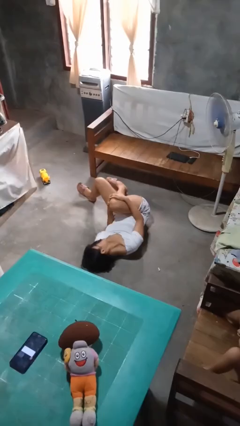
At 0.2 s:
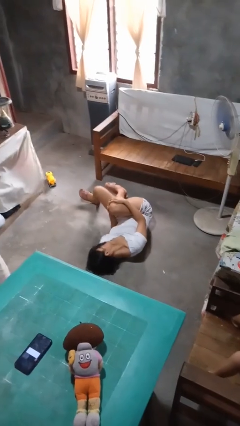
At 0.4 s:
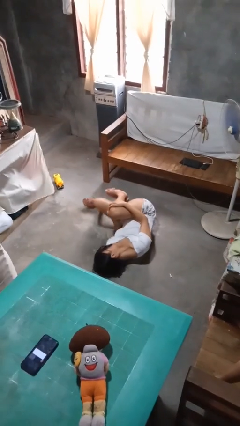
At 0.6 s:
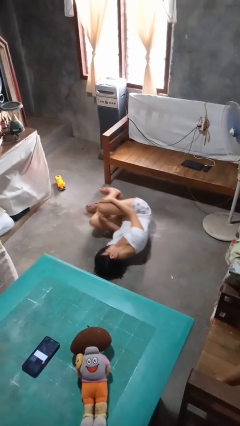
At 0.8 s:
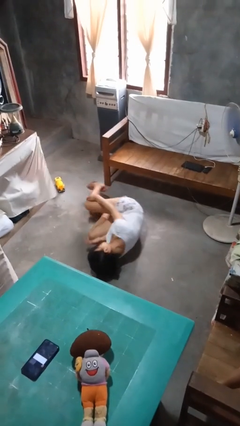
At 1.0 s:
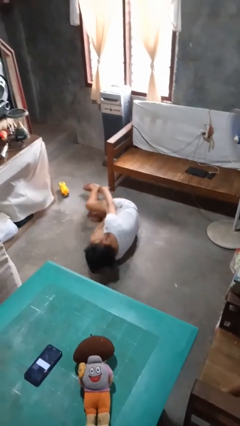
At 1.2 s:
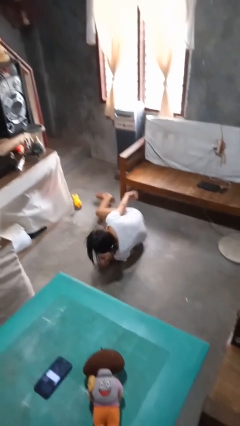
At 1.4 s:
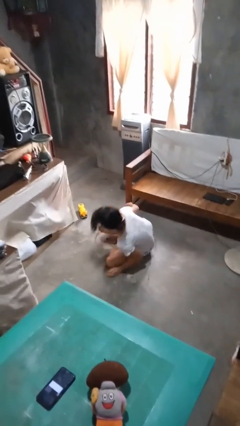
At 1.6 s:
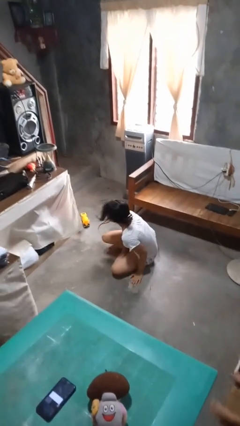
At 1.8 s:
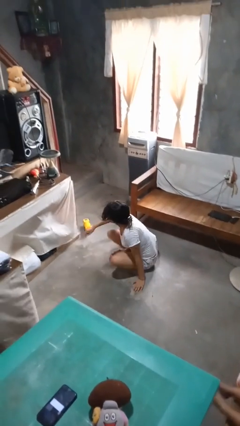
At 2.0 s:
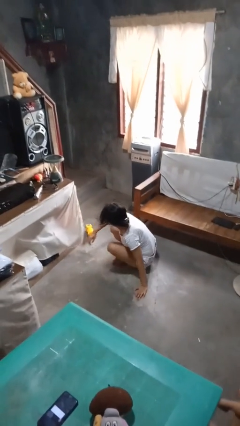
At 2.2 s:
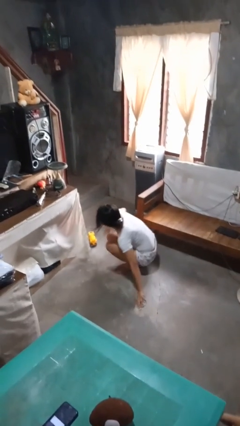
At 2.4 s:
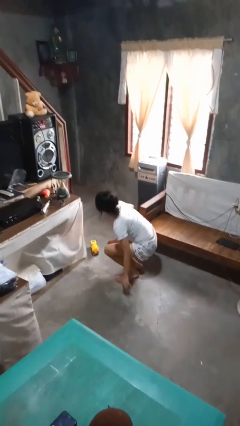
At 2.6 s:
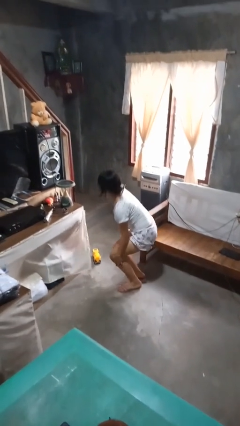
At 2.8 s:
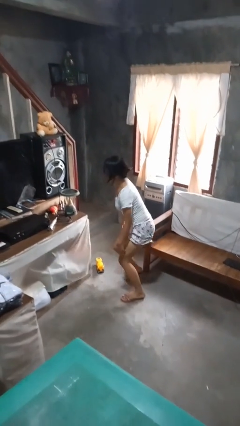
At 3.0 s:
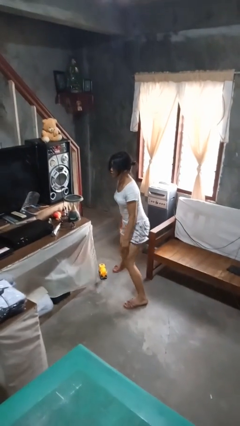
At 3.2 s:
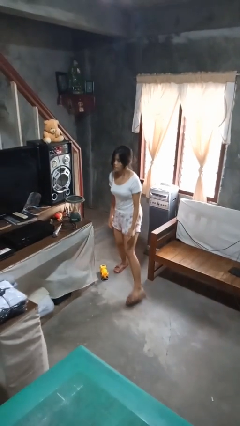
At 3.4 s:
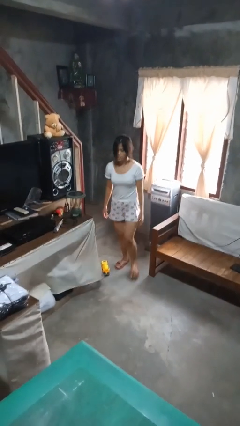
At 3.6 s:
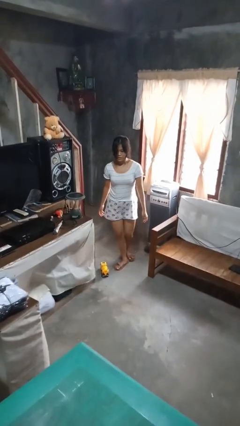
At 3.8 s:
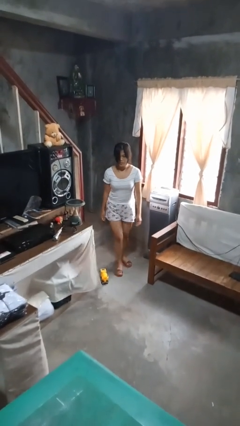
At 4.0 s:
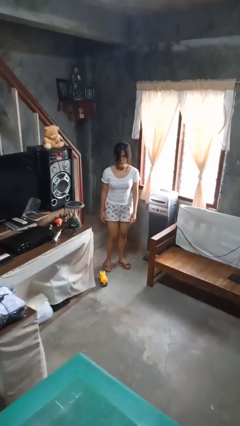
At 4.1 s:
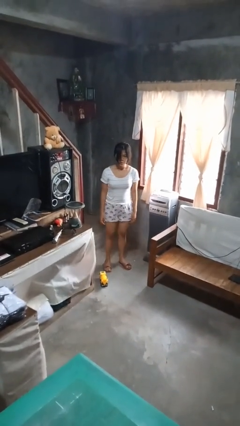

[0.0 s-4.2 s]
person stands up from floor

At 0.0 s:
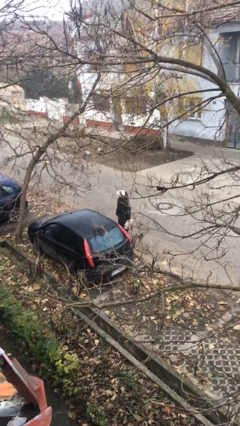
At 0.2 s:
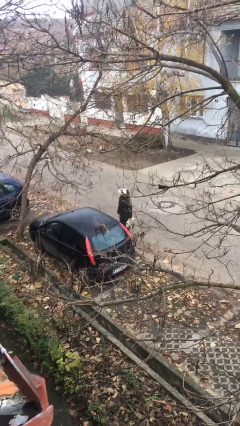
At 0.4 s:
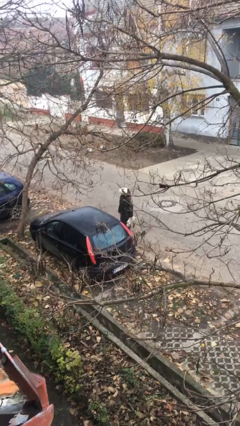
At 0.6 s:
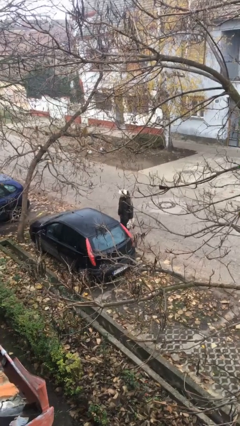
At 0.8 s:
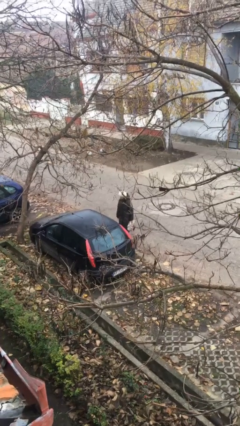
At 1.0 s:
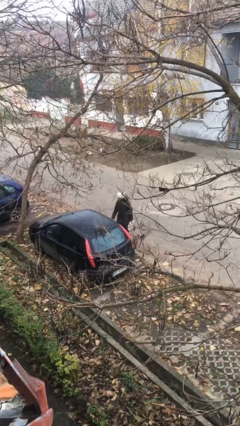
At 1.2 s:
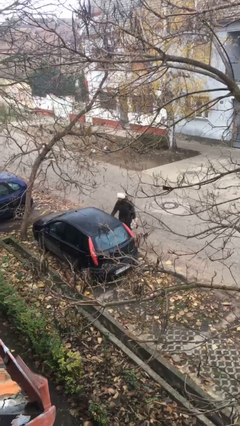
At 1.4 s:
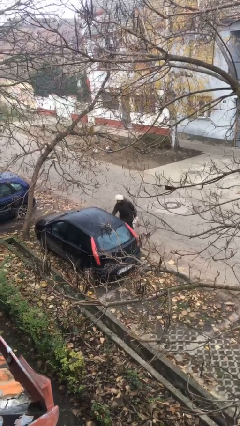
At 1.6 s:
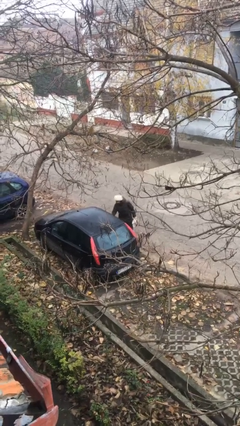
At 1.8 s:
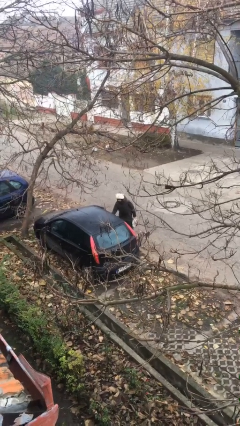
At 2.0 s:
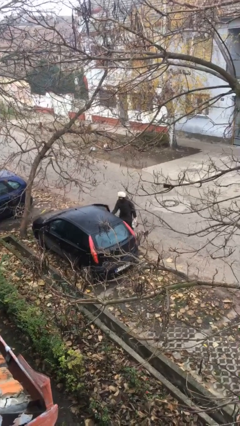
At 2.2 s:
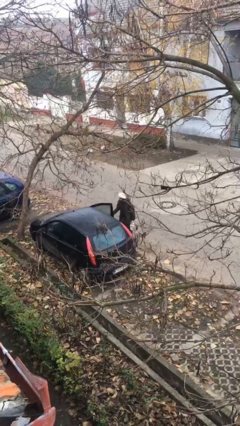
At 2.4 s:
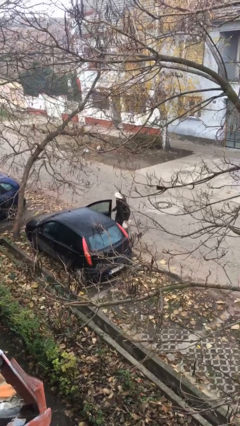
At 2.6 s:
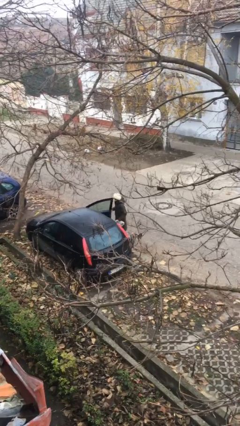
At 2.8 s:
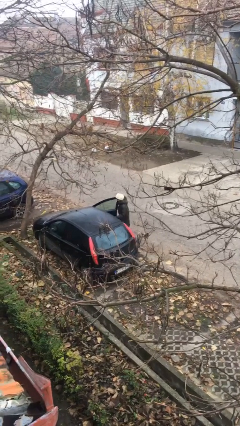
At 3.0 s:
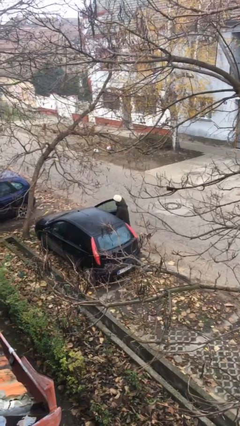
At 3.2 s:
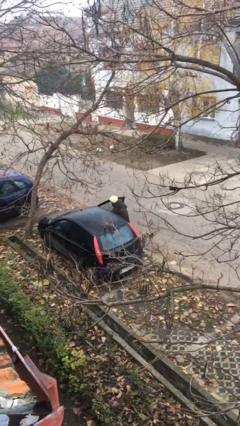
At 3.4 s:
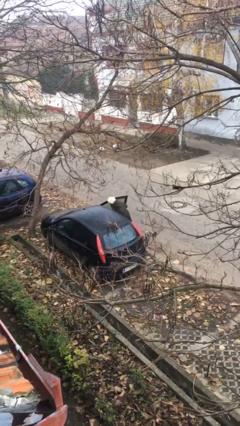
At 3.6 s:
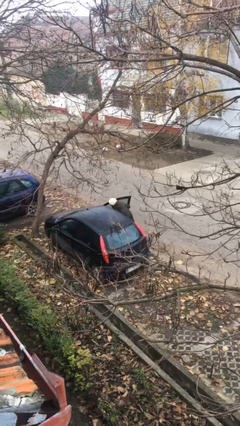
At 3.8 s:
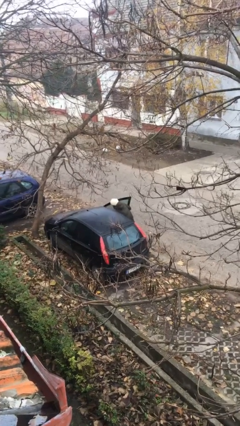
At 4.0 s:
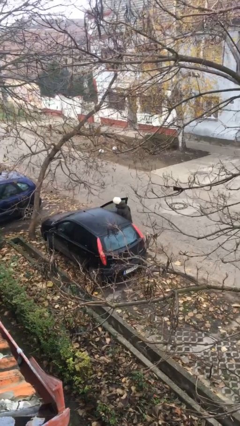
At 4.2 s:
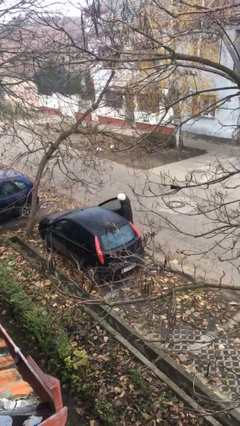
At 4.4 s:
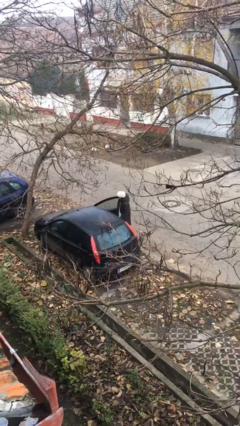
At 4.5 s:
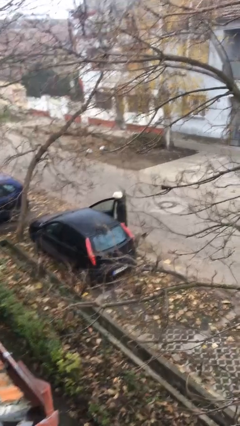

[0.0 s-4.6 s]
person loads car

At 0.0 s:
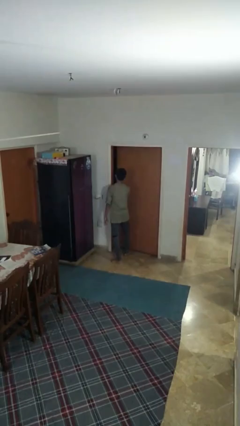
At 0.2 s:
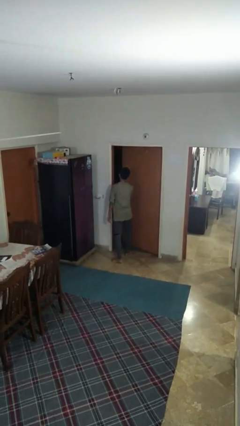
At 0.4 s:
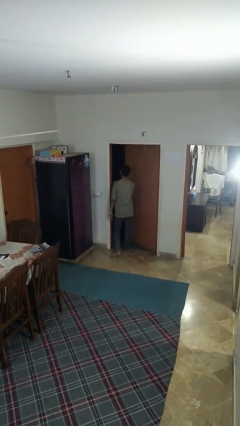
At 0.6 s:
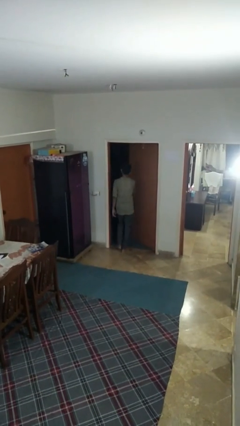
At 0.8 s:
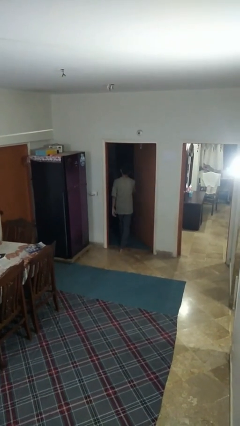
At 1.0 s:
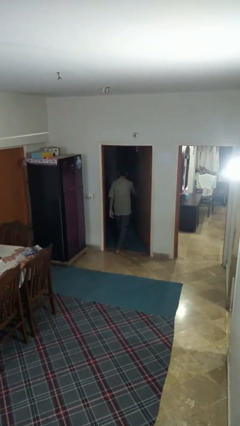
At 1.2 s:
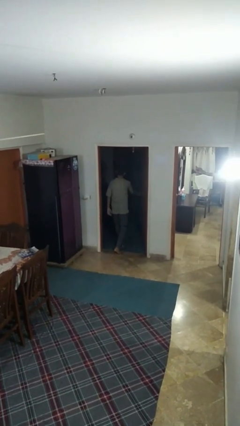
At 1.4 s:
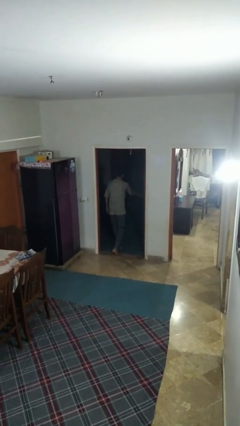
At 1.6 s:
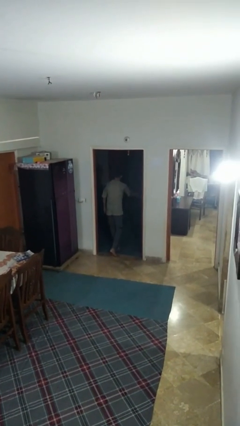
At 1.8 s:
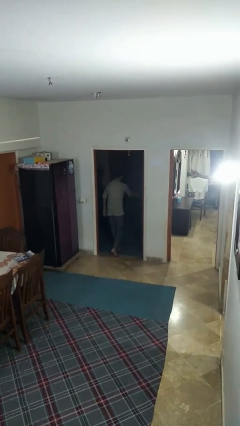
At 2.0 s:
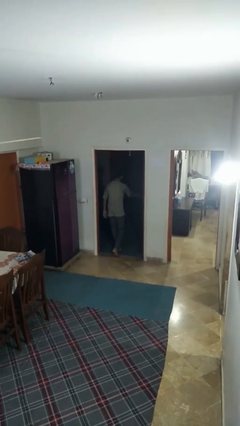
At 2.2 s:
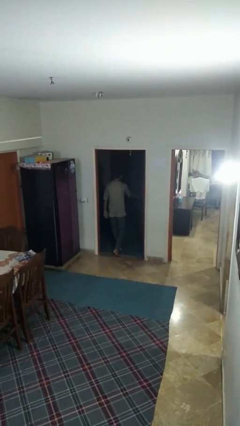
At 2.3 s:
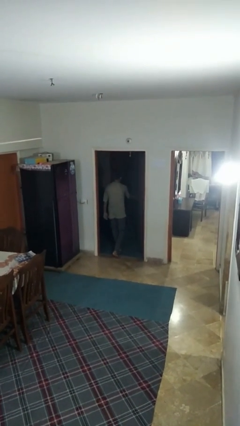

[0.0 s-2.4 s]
person opens facility door

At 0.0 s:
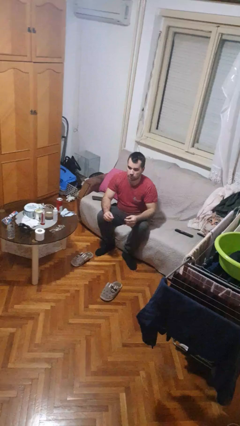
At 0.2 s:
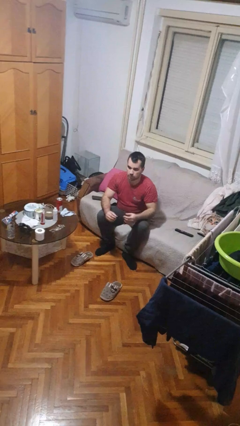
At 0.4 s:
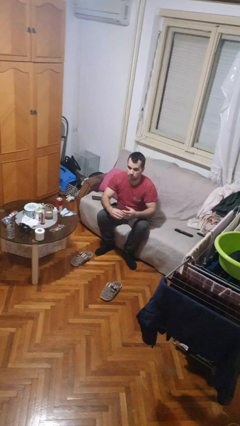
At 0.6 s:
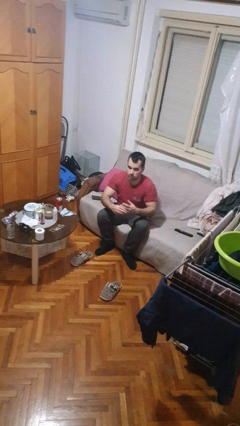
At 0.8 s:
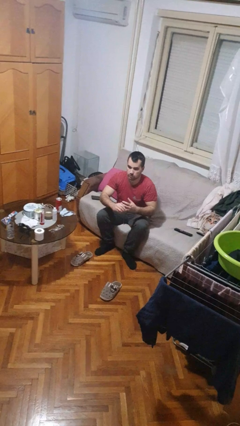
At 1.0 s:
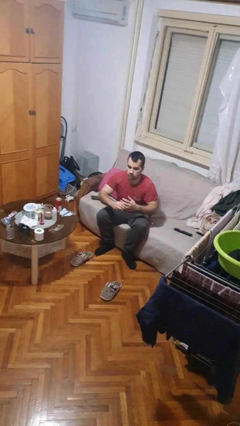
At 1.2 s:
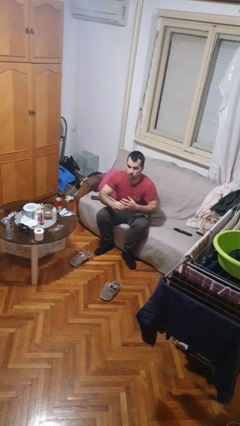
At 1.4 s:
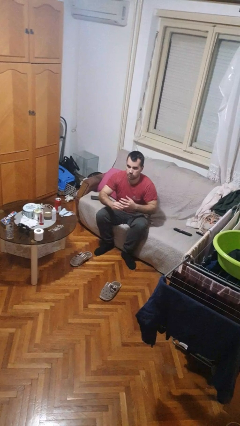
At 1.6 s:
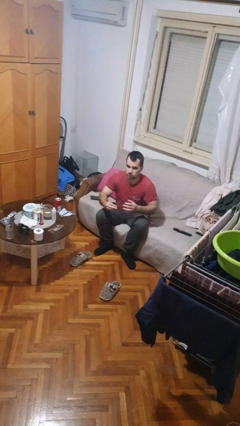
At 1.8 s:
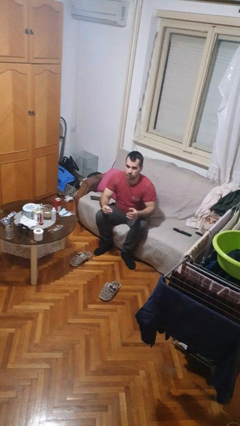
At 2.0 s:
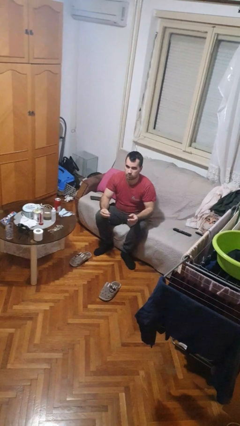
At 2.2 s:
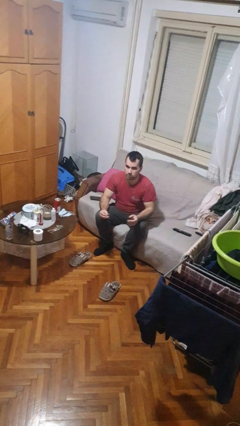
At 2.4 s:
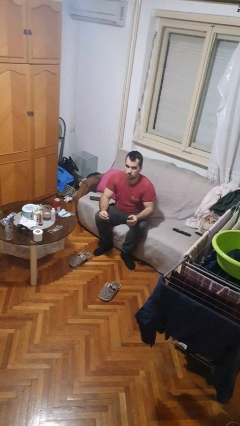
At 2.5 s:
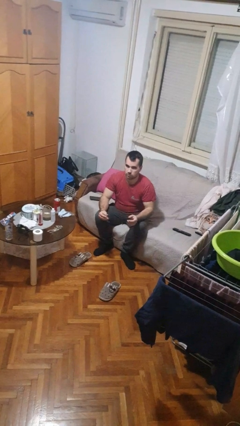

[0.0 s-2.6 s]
person takes off ring

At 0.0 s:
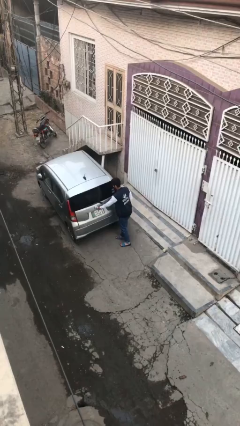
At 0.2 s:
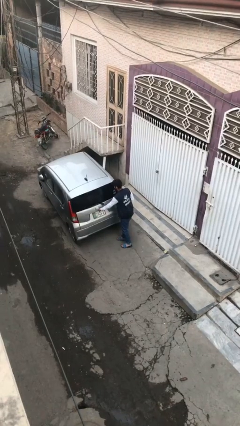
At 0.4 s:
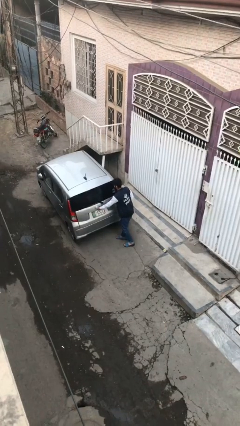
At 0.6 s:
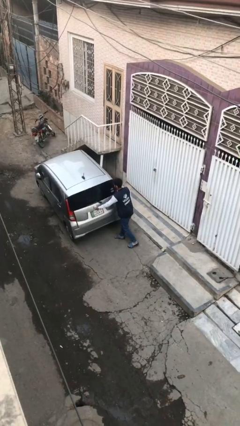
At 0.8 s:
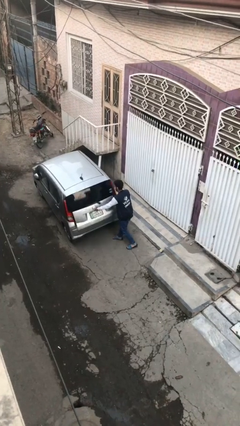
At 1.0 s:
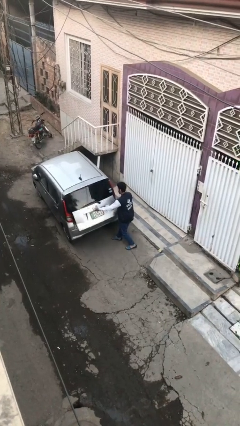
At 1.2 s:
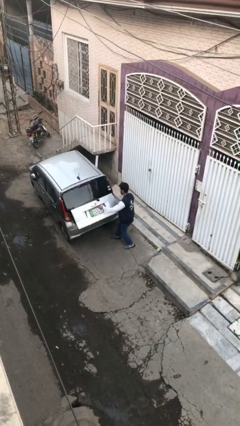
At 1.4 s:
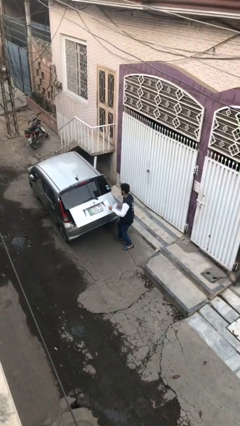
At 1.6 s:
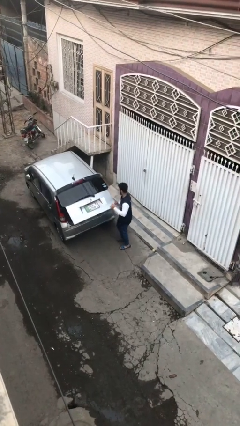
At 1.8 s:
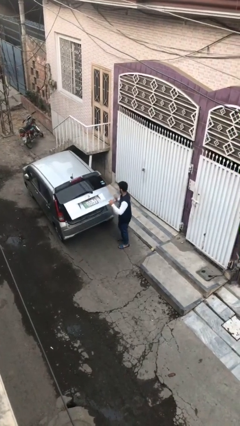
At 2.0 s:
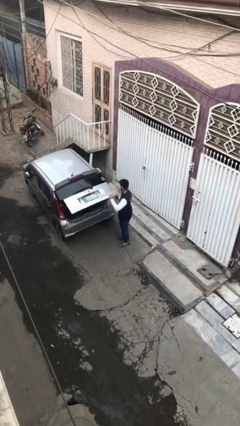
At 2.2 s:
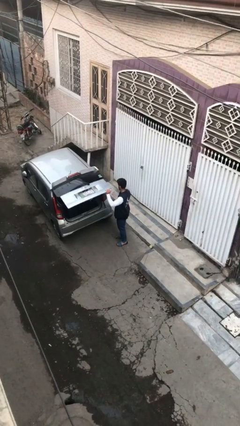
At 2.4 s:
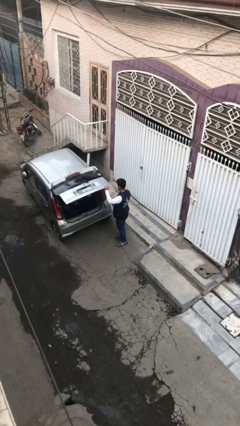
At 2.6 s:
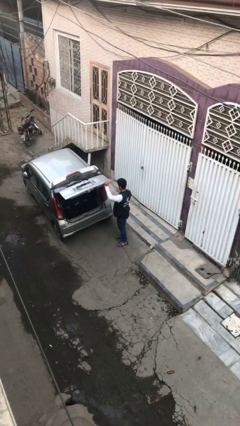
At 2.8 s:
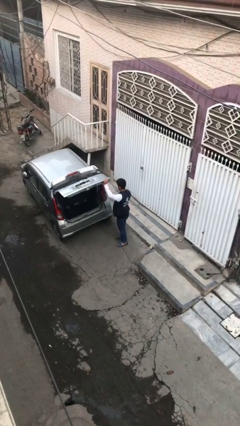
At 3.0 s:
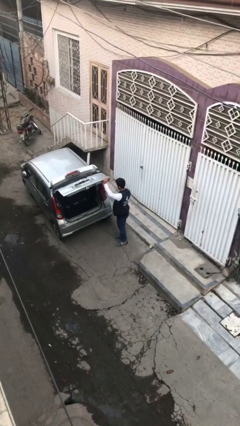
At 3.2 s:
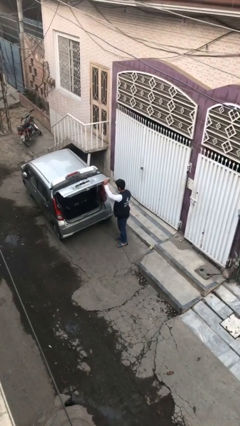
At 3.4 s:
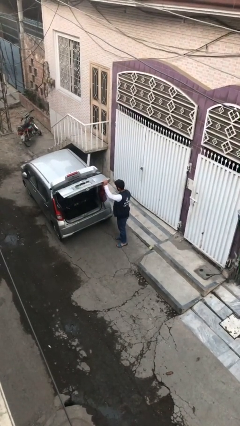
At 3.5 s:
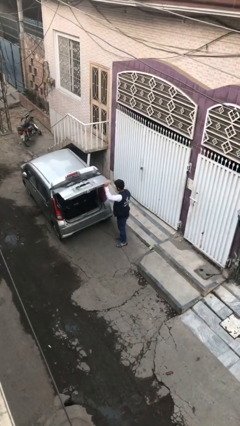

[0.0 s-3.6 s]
person opens car trunk
